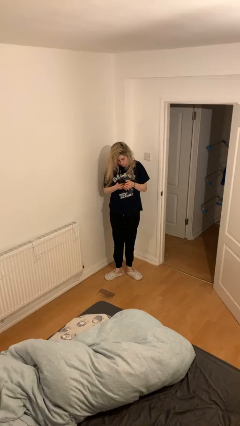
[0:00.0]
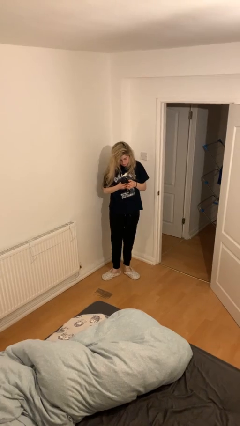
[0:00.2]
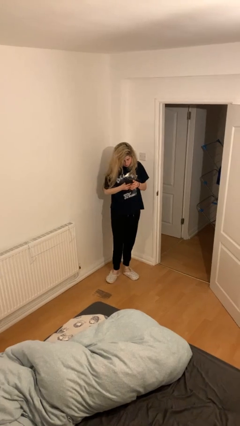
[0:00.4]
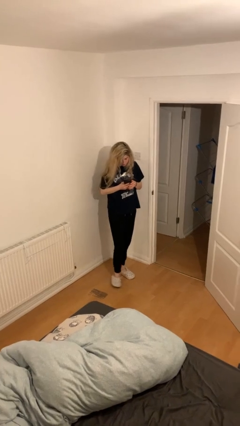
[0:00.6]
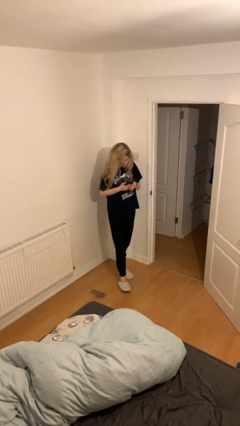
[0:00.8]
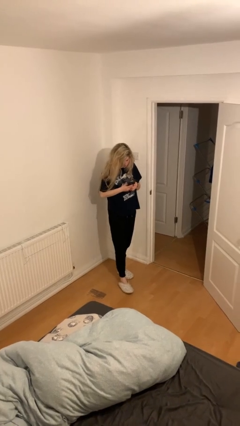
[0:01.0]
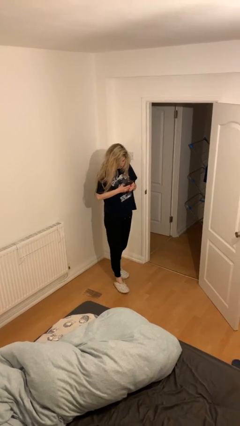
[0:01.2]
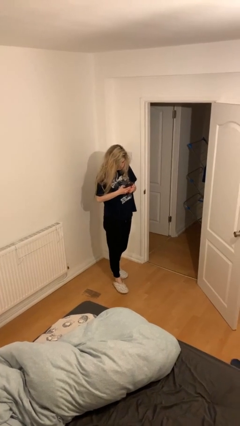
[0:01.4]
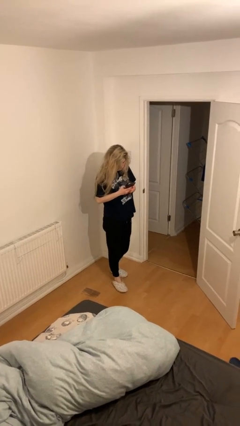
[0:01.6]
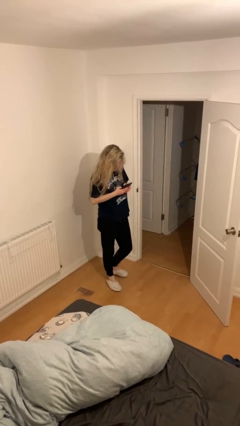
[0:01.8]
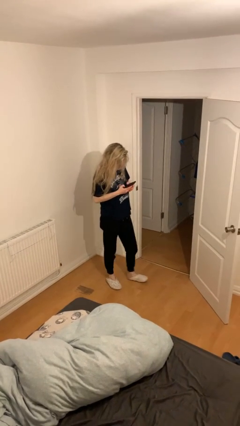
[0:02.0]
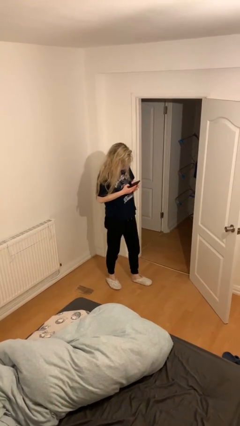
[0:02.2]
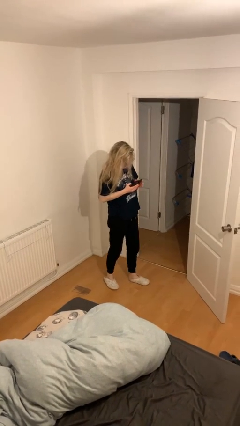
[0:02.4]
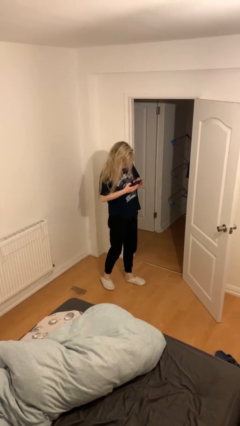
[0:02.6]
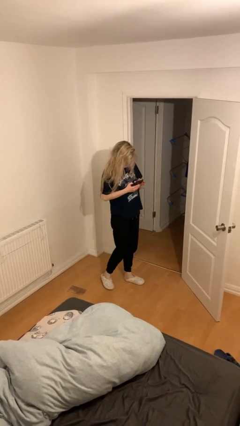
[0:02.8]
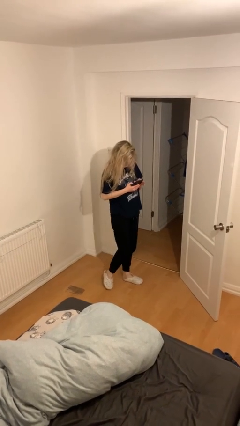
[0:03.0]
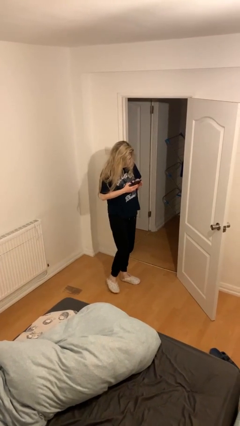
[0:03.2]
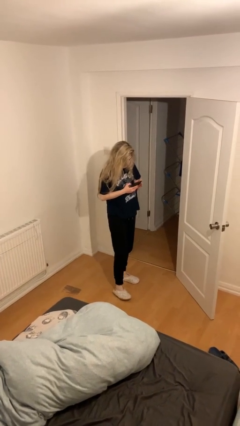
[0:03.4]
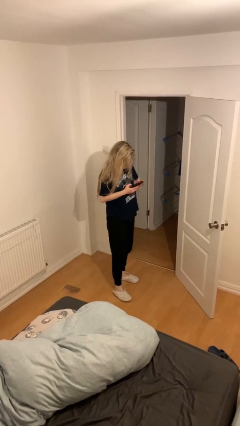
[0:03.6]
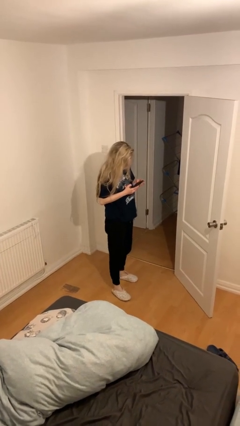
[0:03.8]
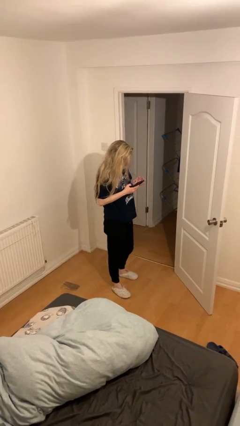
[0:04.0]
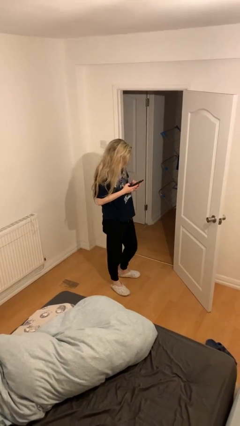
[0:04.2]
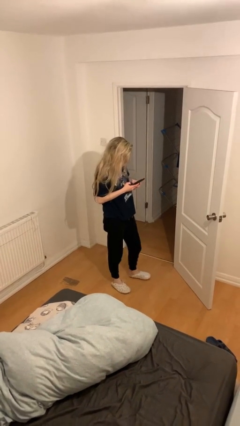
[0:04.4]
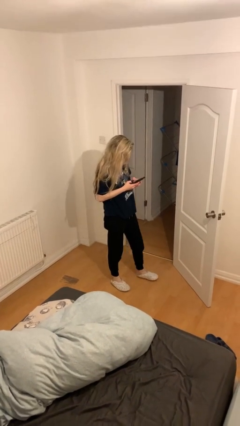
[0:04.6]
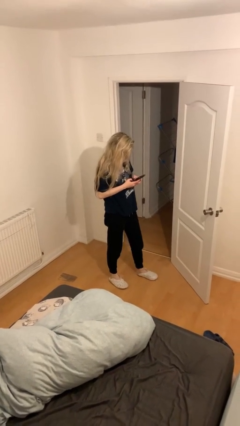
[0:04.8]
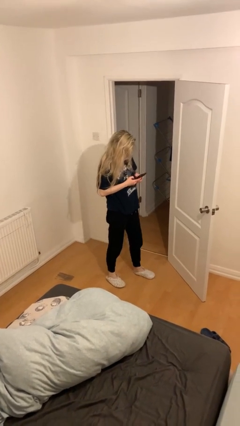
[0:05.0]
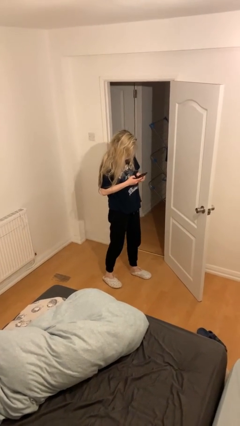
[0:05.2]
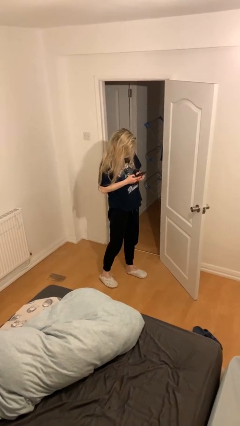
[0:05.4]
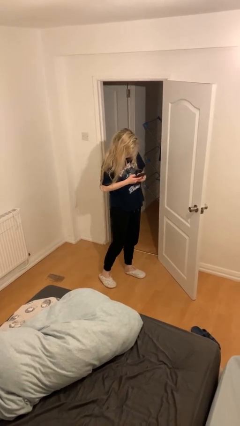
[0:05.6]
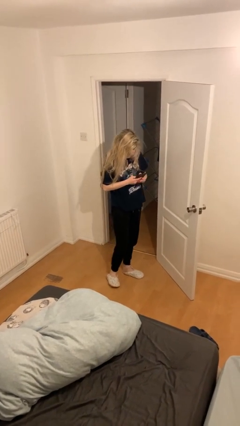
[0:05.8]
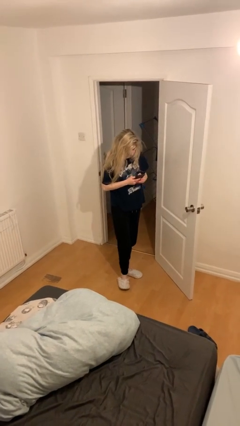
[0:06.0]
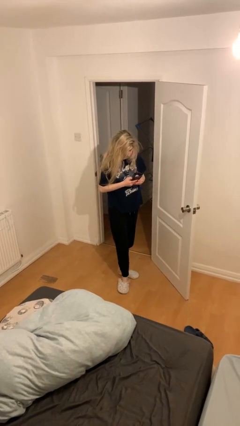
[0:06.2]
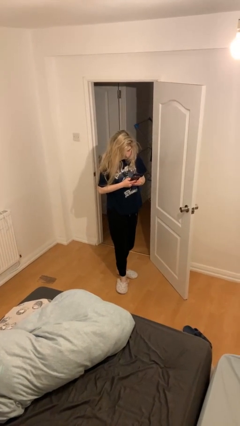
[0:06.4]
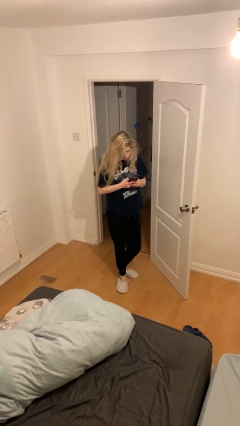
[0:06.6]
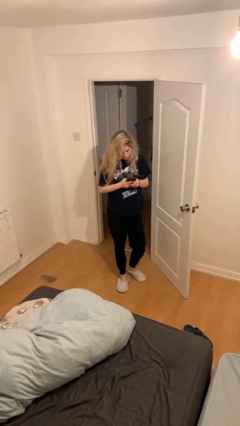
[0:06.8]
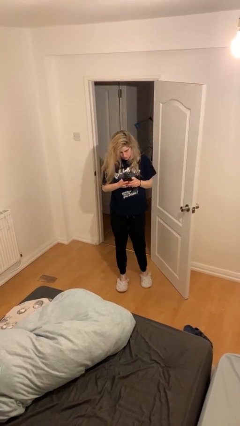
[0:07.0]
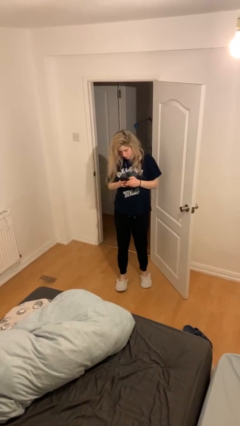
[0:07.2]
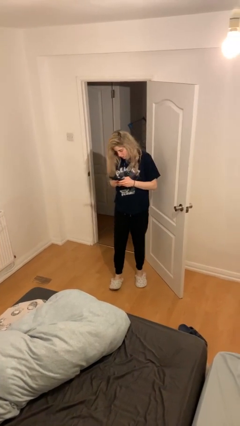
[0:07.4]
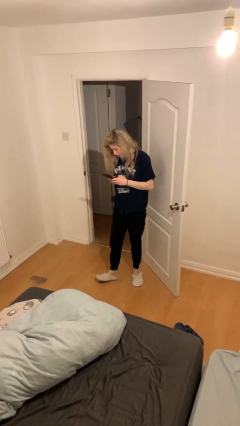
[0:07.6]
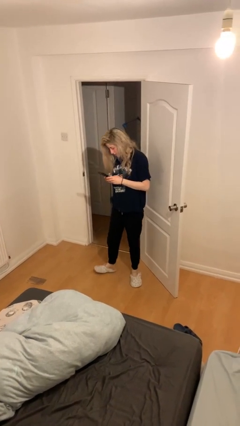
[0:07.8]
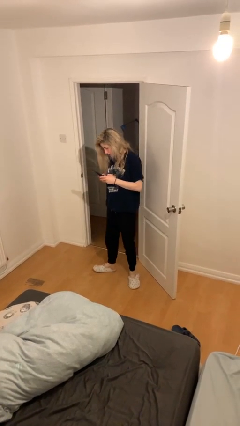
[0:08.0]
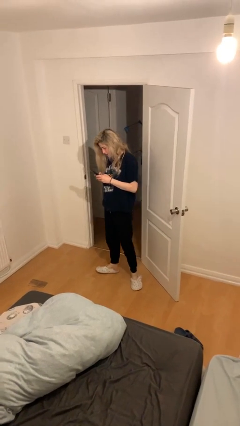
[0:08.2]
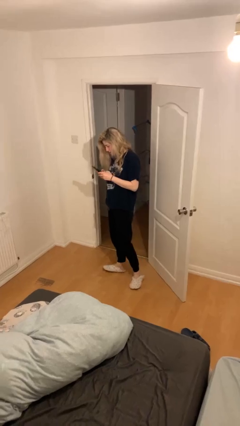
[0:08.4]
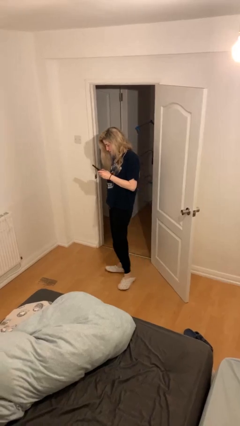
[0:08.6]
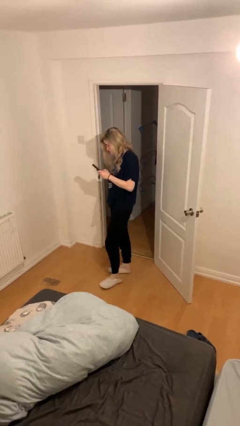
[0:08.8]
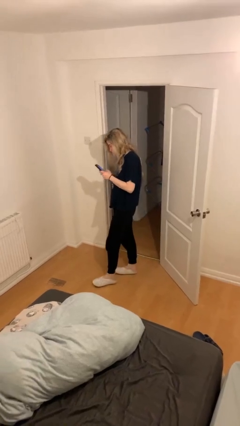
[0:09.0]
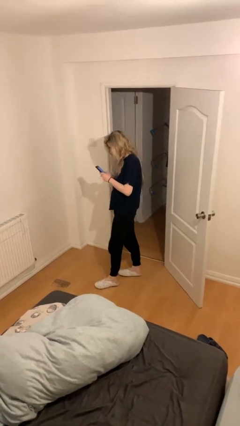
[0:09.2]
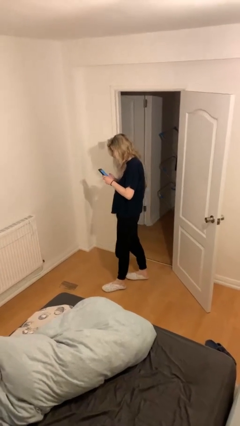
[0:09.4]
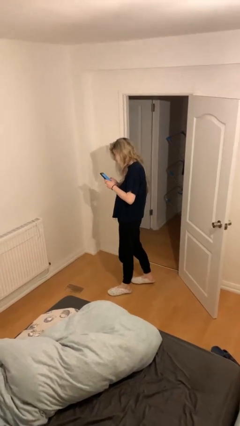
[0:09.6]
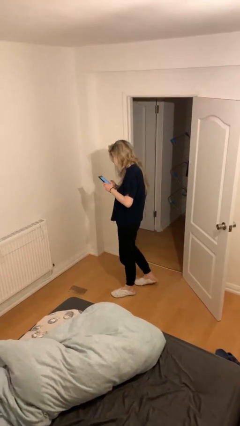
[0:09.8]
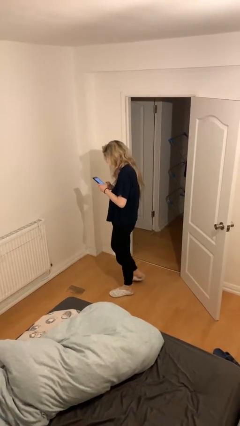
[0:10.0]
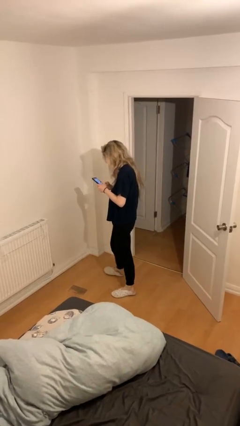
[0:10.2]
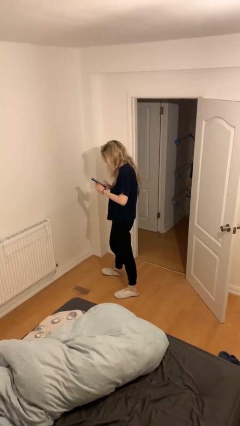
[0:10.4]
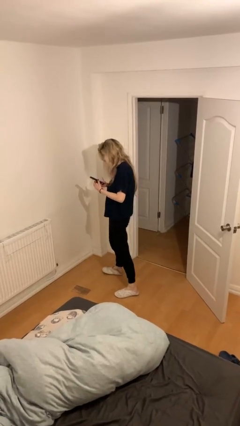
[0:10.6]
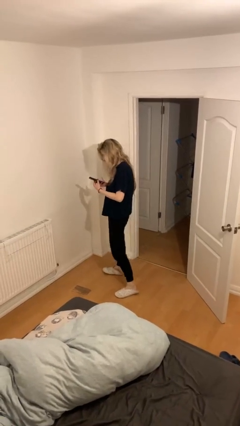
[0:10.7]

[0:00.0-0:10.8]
person texts on phone

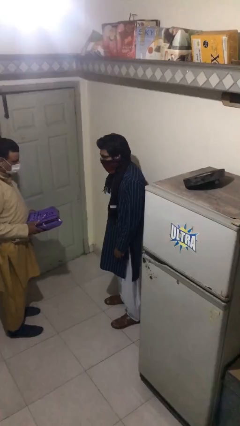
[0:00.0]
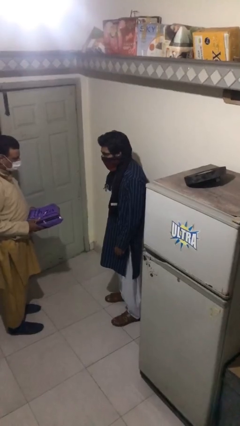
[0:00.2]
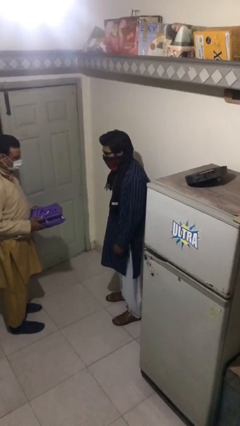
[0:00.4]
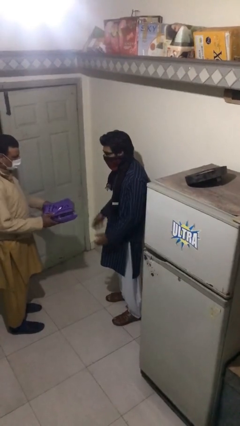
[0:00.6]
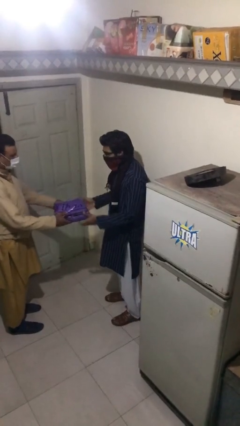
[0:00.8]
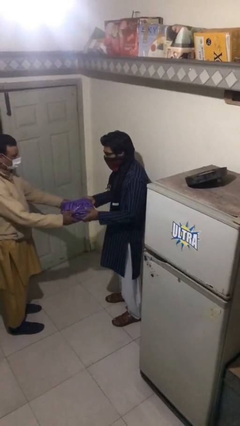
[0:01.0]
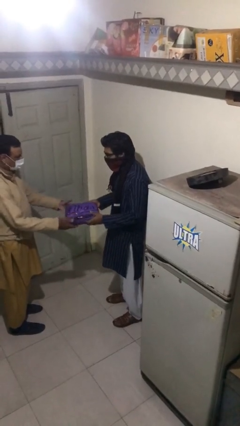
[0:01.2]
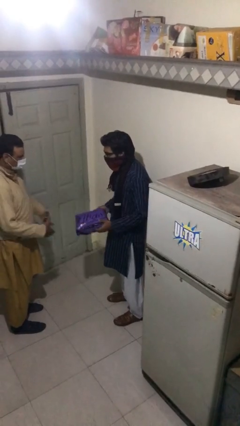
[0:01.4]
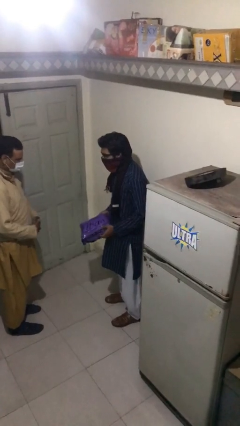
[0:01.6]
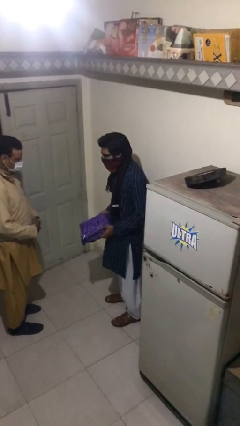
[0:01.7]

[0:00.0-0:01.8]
person transfers object to person

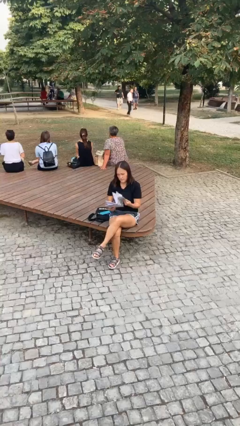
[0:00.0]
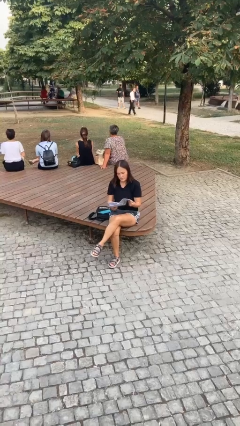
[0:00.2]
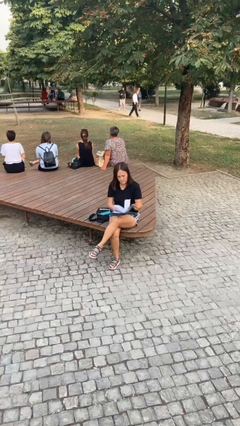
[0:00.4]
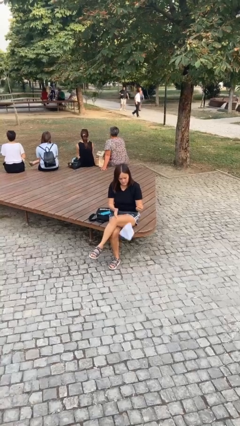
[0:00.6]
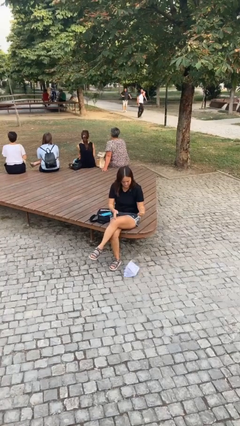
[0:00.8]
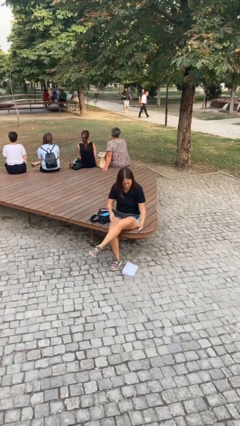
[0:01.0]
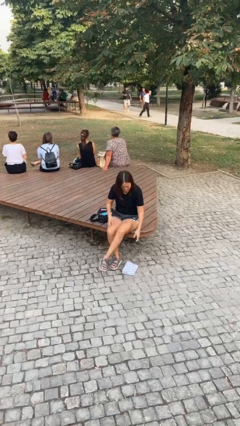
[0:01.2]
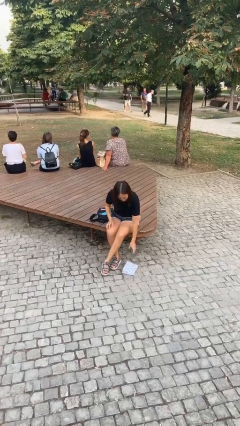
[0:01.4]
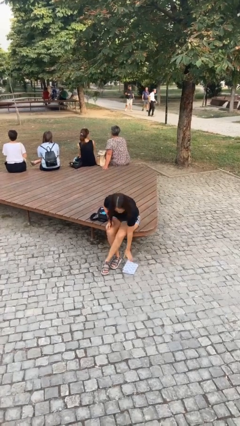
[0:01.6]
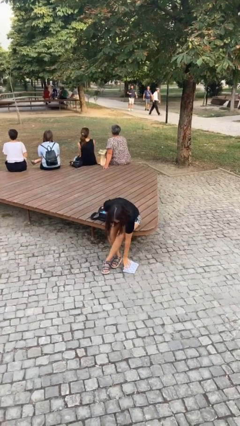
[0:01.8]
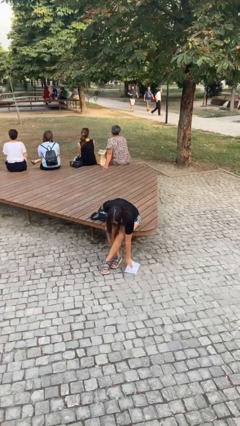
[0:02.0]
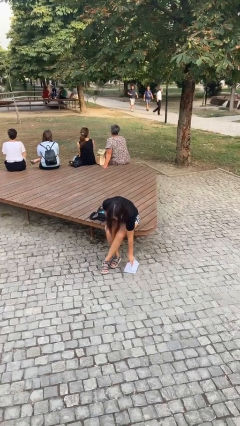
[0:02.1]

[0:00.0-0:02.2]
person drops object

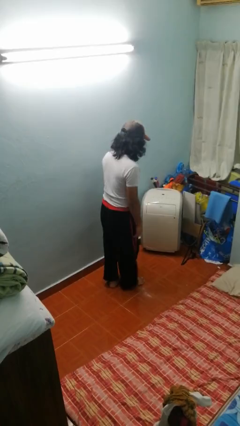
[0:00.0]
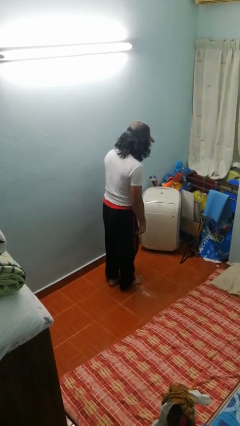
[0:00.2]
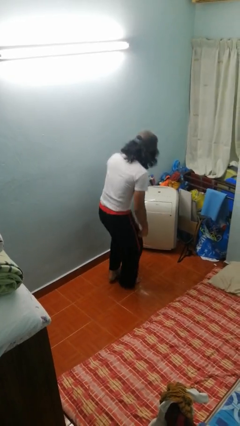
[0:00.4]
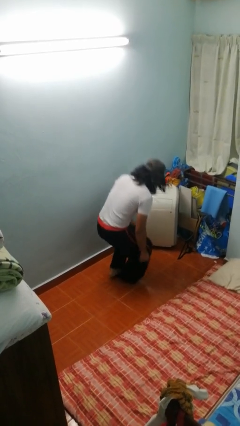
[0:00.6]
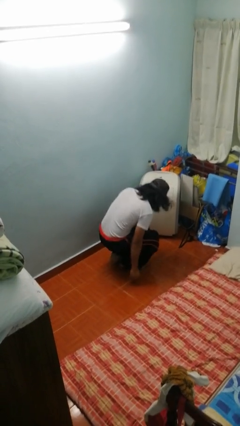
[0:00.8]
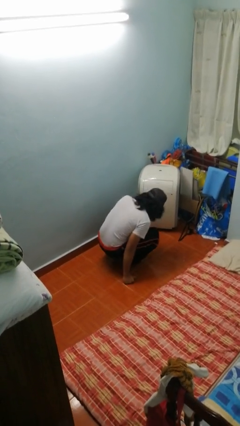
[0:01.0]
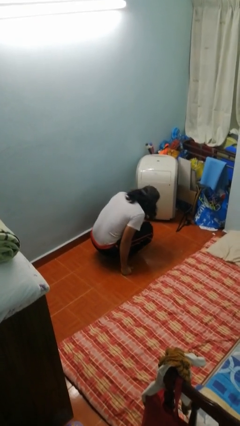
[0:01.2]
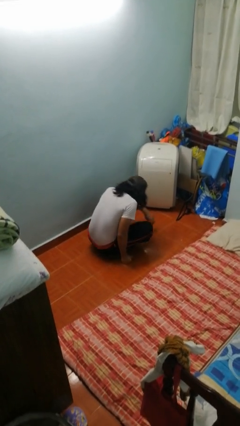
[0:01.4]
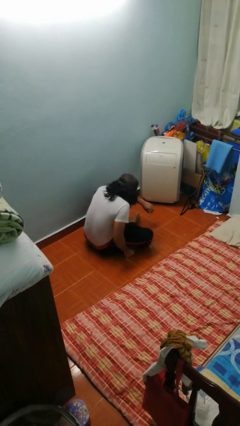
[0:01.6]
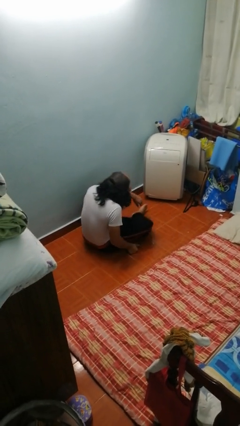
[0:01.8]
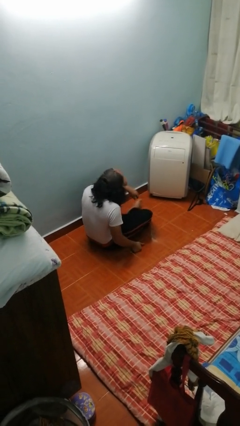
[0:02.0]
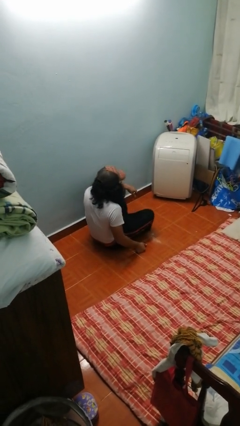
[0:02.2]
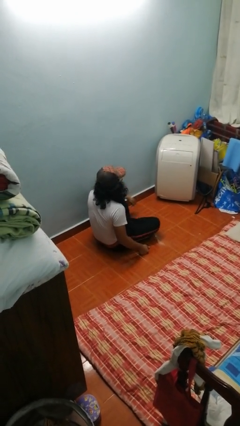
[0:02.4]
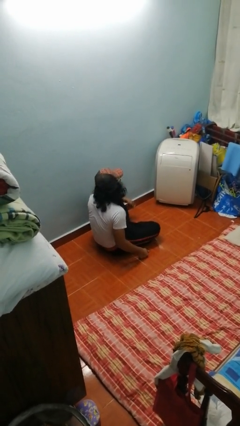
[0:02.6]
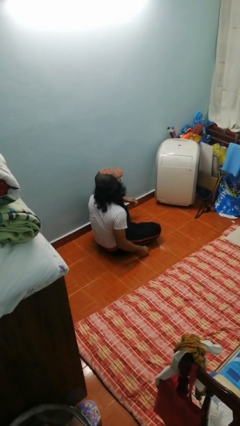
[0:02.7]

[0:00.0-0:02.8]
person sits crisscross
